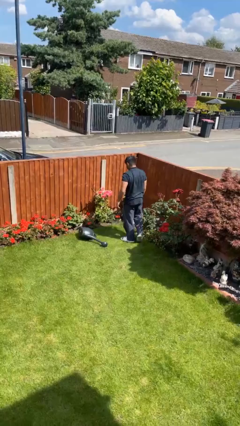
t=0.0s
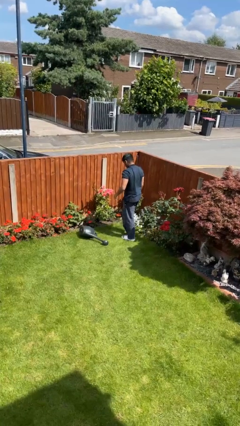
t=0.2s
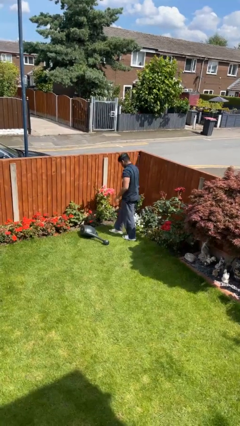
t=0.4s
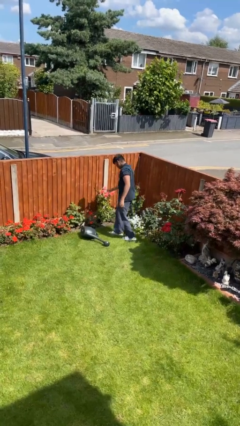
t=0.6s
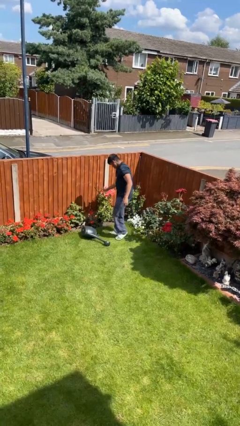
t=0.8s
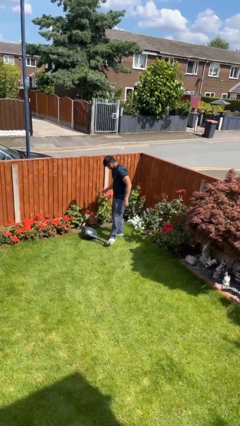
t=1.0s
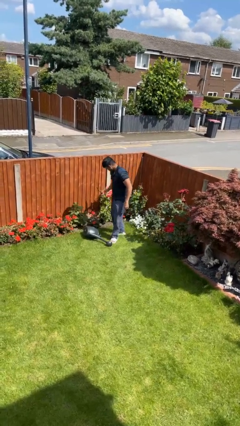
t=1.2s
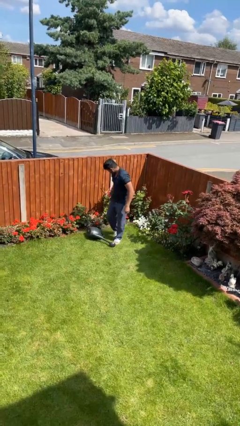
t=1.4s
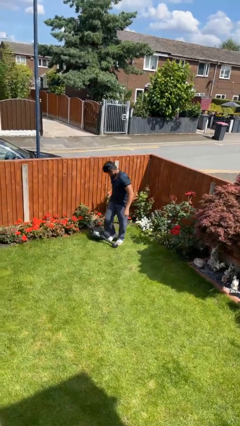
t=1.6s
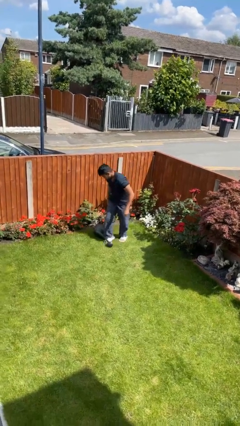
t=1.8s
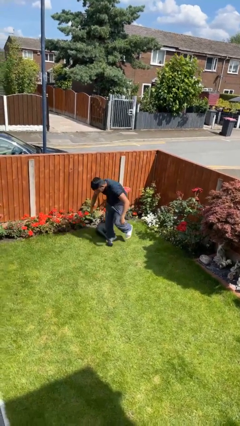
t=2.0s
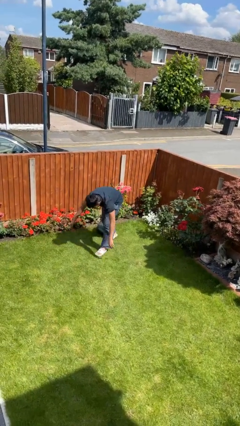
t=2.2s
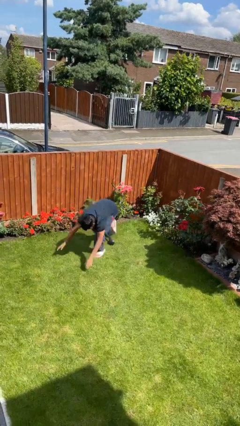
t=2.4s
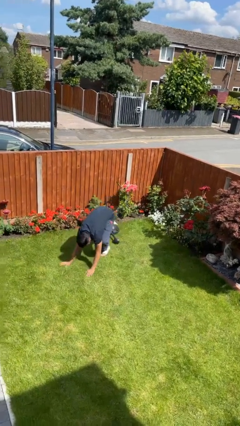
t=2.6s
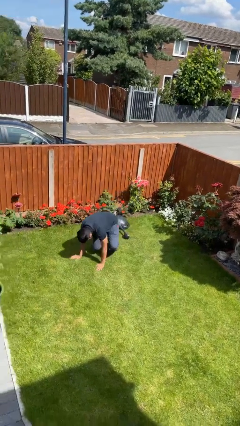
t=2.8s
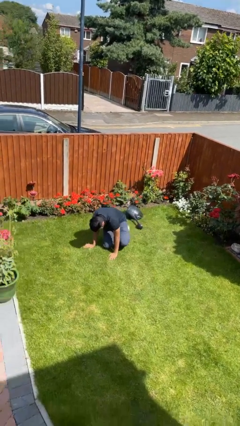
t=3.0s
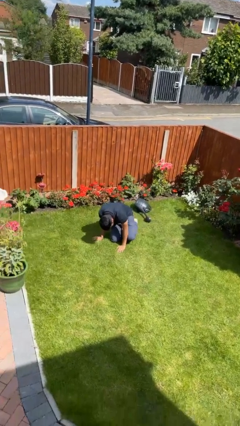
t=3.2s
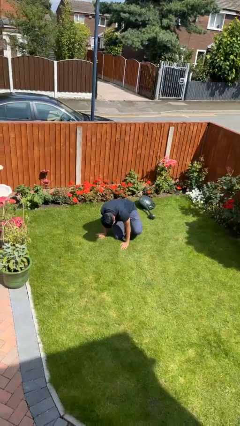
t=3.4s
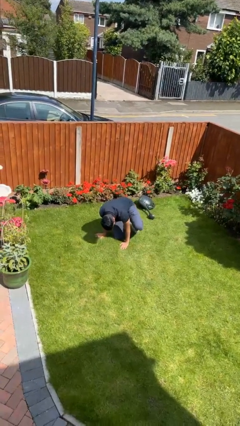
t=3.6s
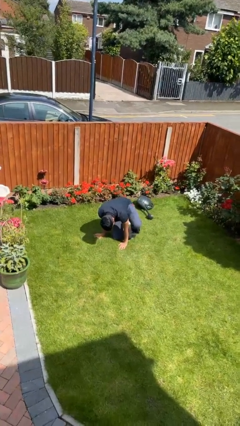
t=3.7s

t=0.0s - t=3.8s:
person trips on object on floor

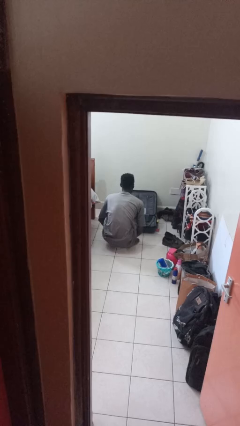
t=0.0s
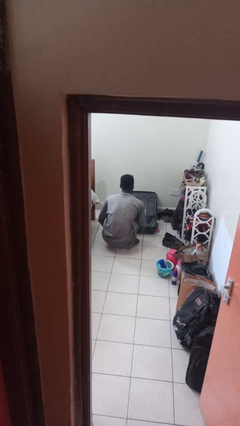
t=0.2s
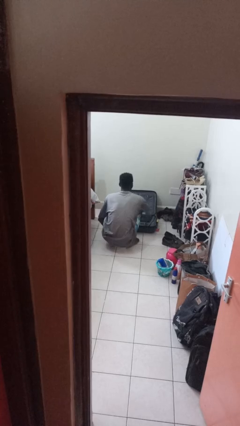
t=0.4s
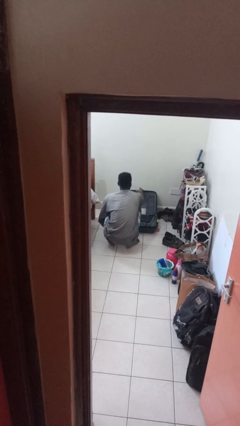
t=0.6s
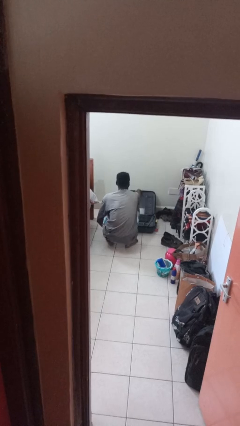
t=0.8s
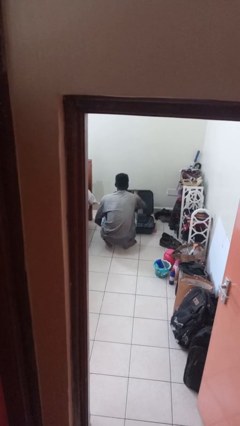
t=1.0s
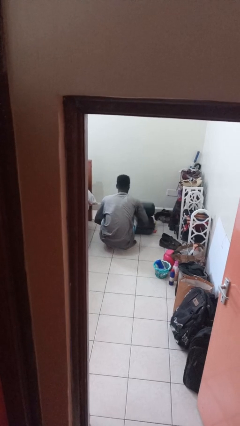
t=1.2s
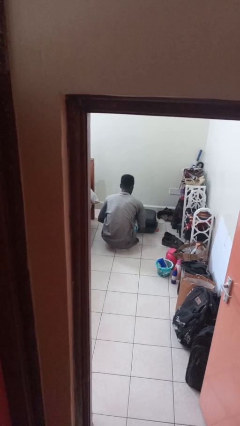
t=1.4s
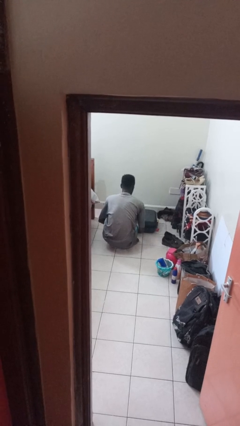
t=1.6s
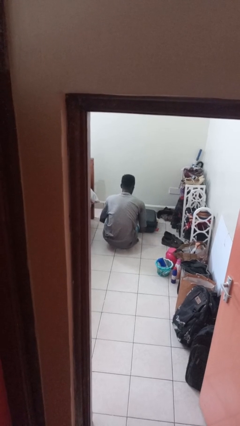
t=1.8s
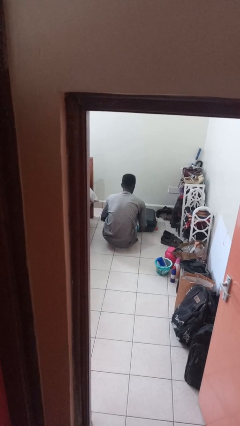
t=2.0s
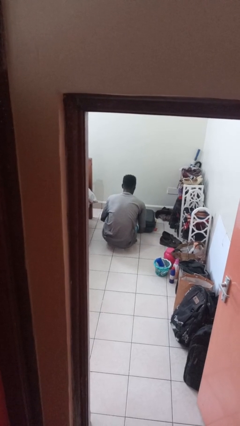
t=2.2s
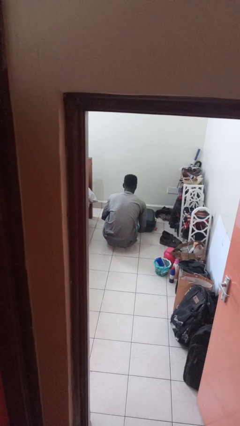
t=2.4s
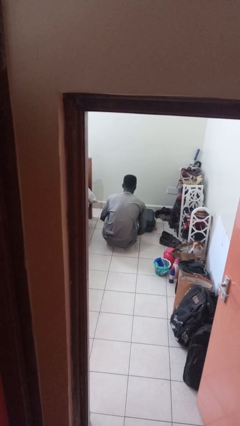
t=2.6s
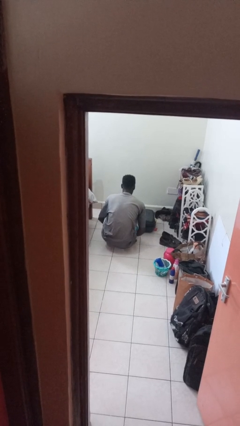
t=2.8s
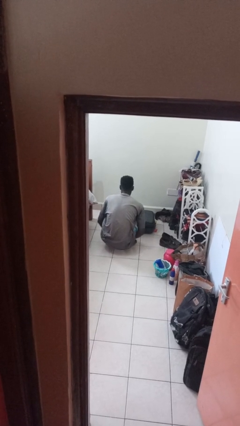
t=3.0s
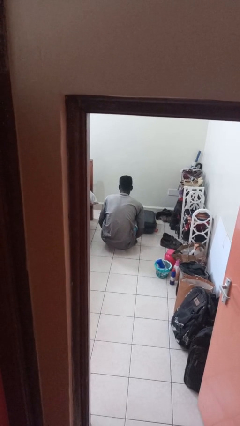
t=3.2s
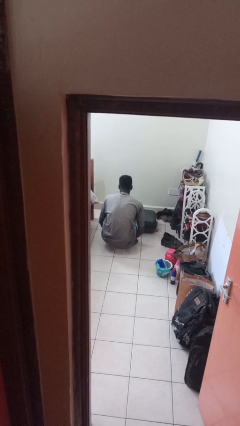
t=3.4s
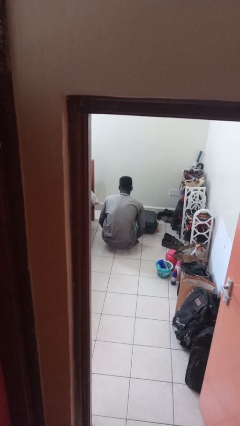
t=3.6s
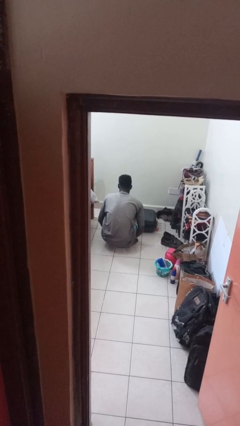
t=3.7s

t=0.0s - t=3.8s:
person closes suitcase

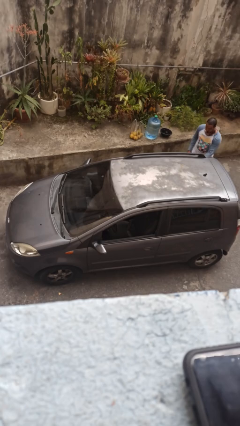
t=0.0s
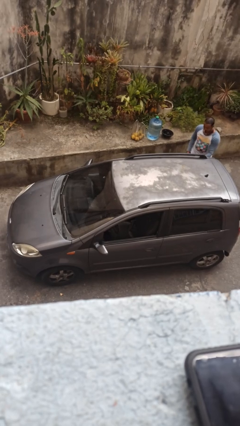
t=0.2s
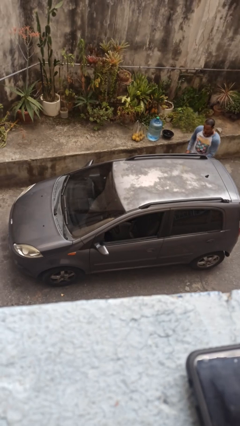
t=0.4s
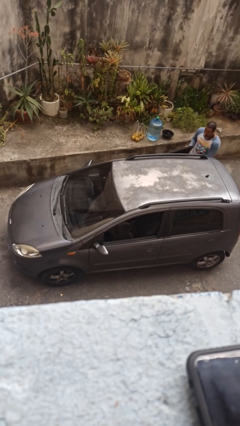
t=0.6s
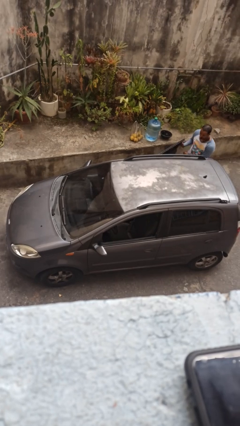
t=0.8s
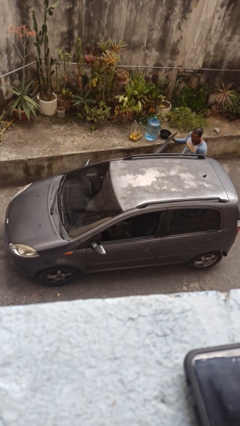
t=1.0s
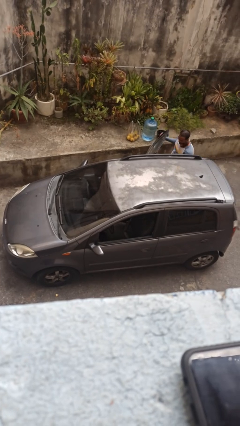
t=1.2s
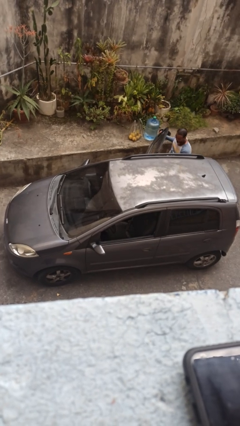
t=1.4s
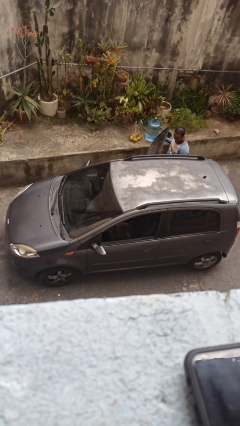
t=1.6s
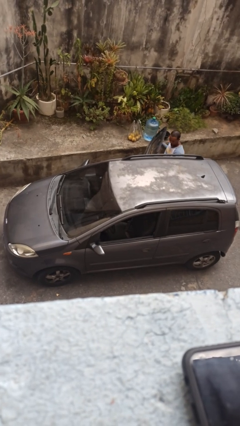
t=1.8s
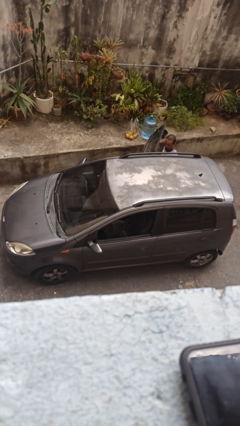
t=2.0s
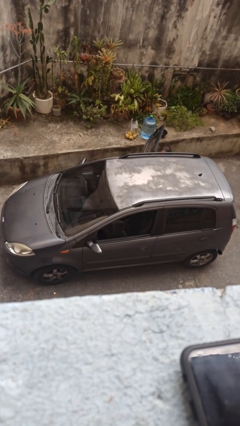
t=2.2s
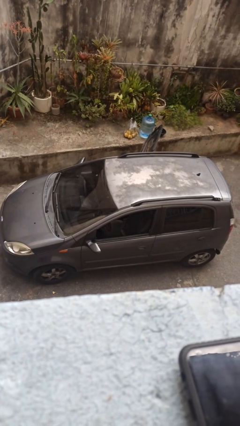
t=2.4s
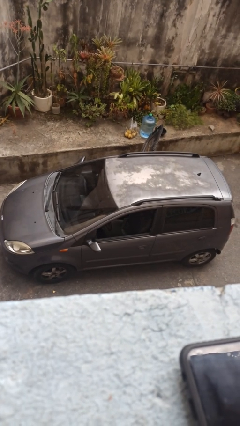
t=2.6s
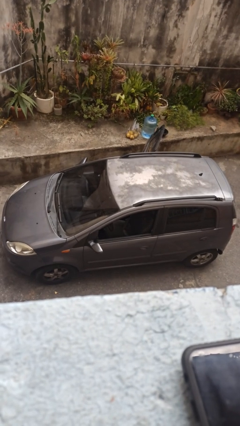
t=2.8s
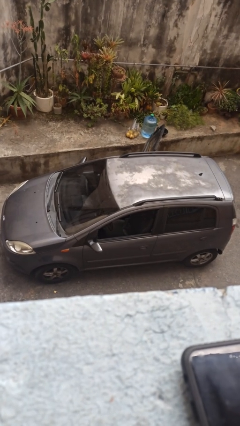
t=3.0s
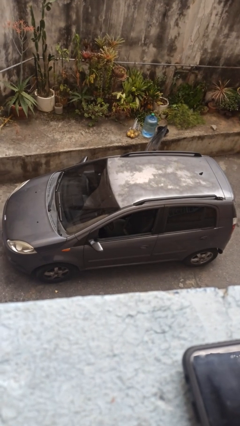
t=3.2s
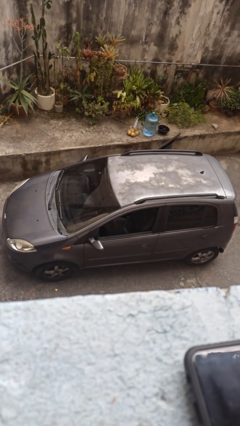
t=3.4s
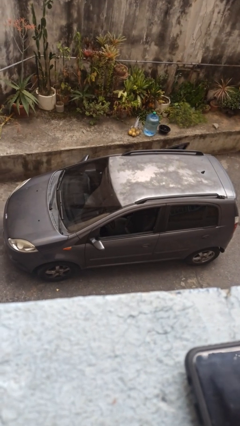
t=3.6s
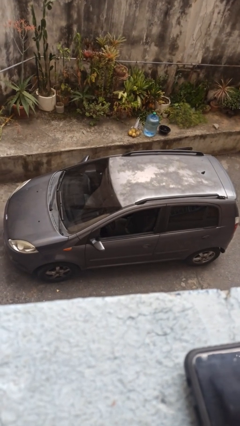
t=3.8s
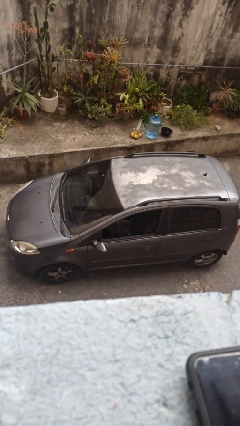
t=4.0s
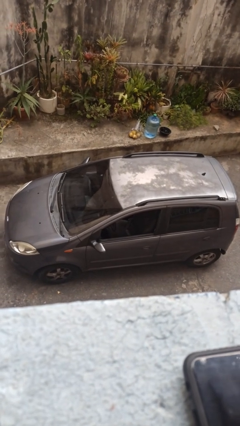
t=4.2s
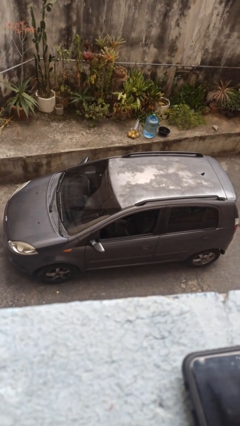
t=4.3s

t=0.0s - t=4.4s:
car picks up person

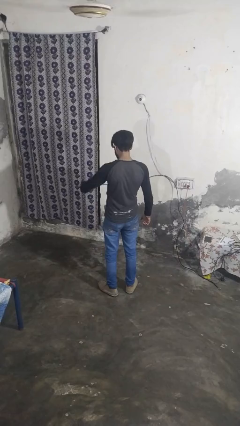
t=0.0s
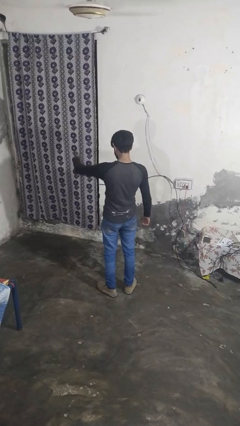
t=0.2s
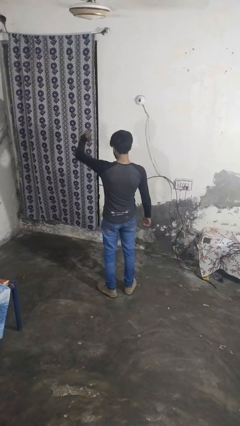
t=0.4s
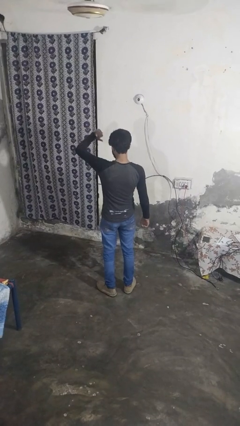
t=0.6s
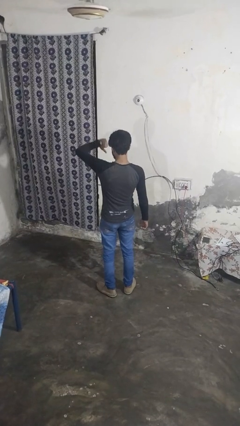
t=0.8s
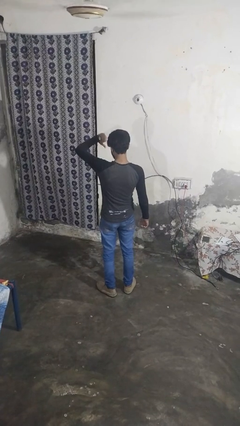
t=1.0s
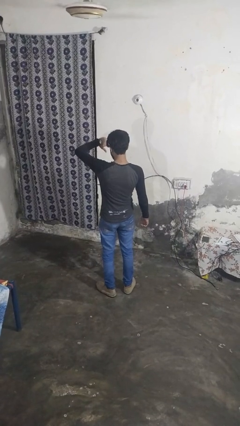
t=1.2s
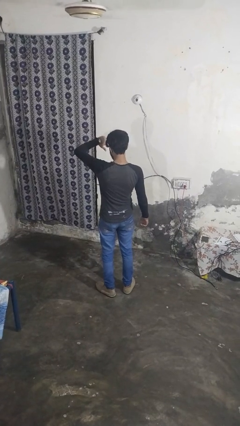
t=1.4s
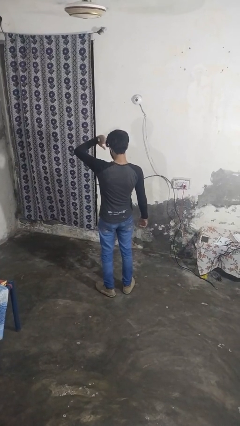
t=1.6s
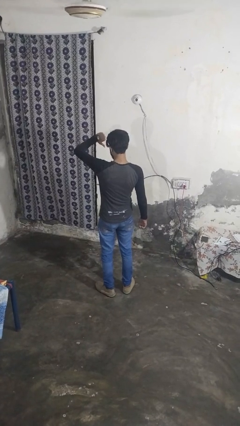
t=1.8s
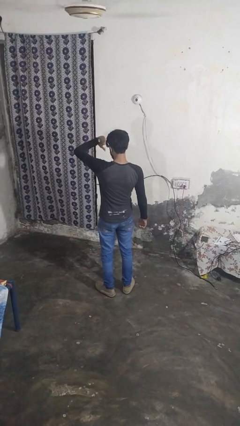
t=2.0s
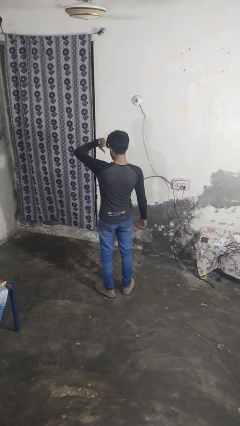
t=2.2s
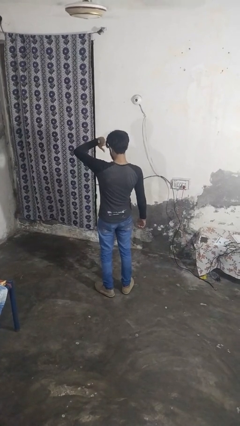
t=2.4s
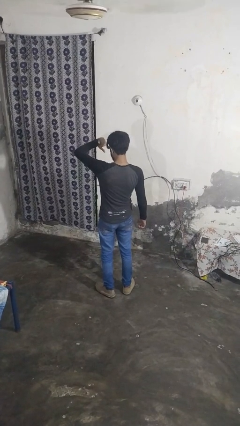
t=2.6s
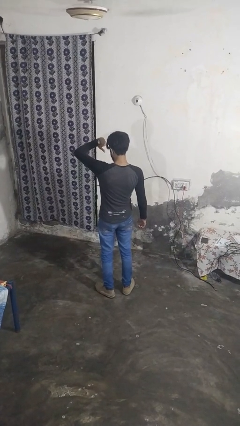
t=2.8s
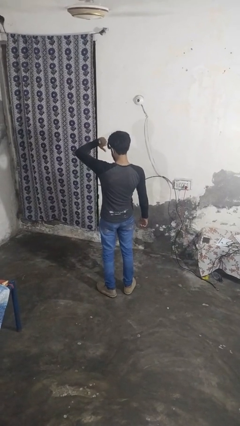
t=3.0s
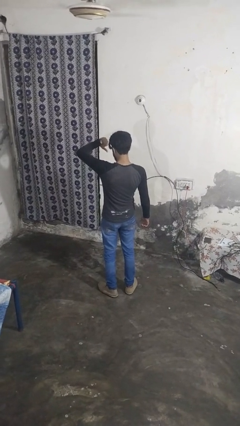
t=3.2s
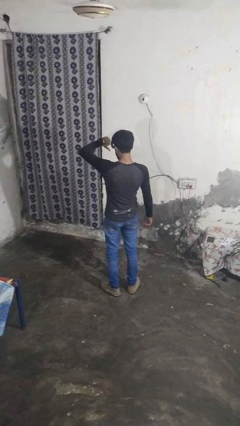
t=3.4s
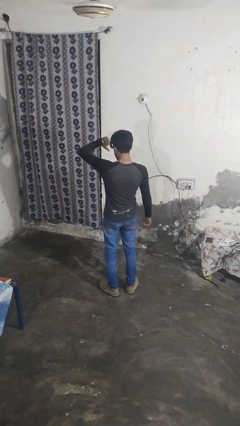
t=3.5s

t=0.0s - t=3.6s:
person gestures thumbs down

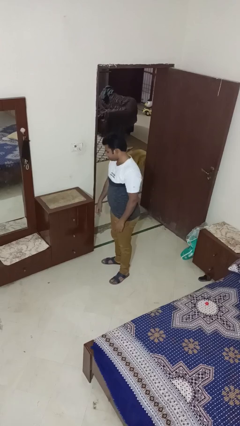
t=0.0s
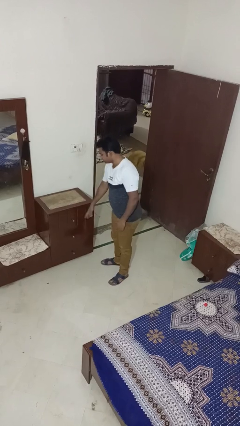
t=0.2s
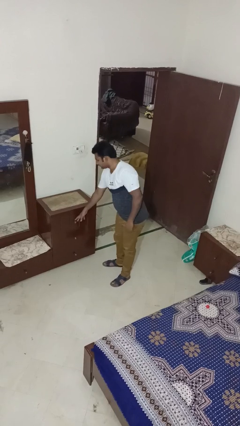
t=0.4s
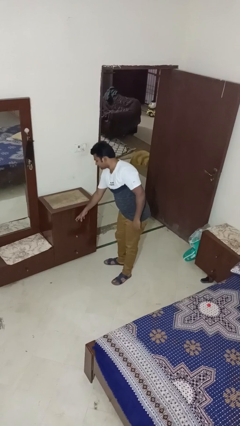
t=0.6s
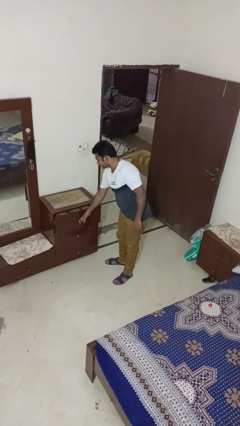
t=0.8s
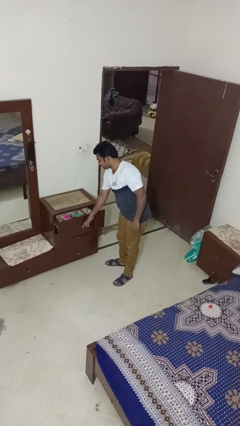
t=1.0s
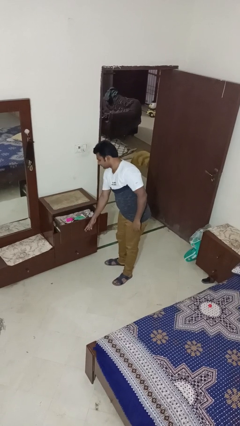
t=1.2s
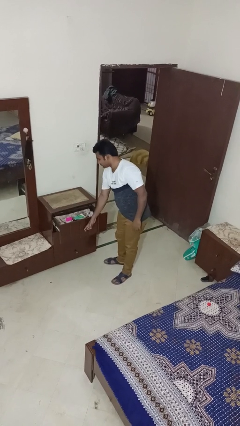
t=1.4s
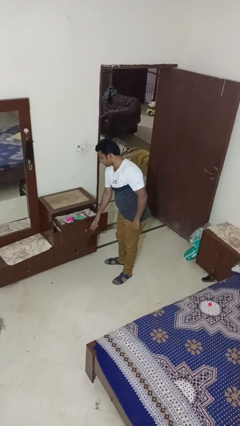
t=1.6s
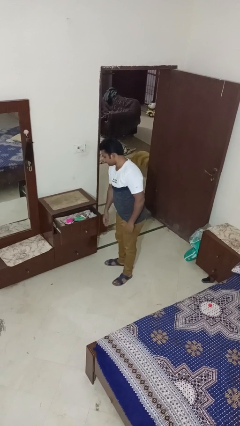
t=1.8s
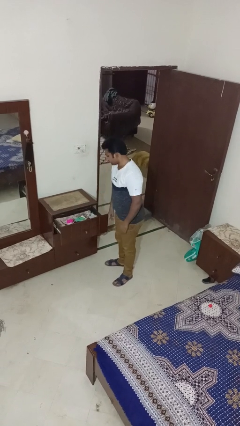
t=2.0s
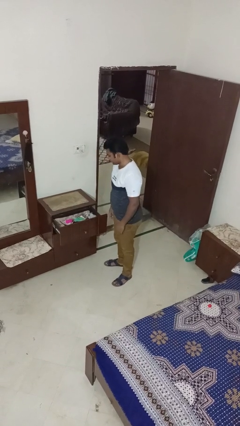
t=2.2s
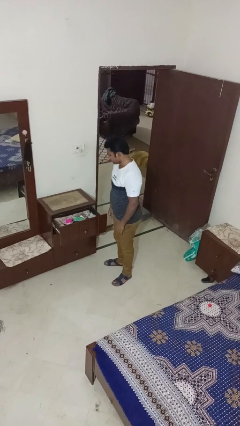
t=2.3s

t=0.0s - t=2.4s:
person opens dresser drawer
